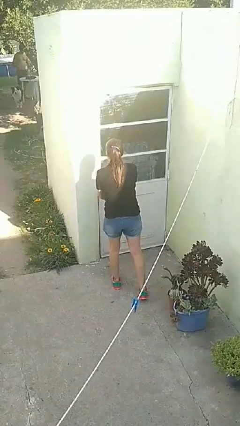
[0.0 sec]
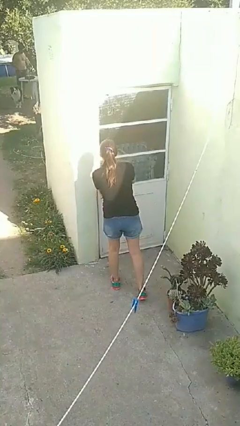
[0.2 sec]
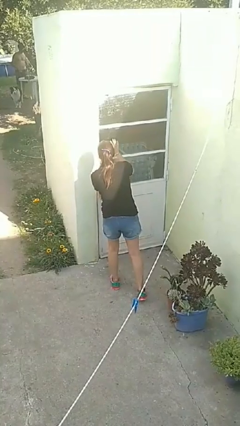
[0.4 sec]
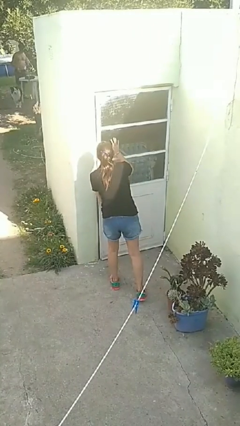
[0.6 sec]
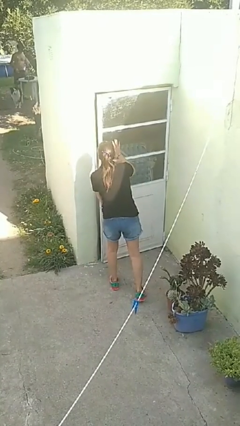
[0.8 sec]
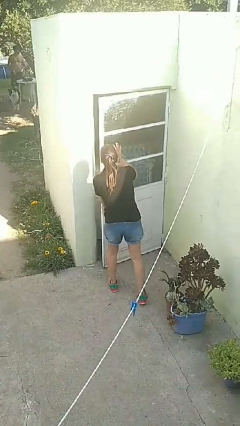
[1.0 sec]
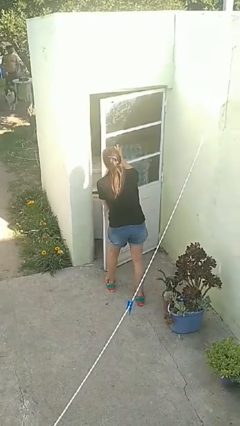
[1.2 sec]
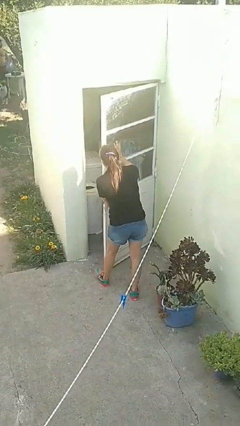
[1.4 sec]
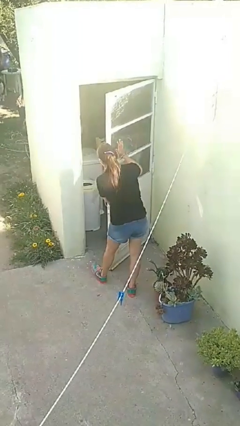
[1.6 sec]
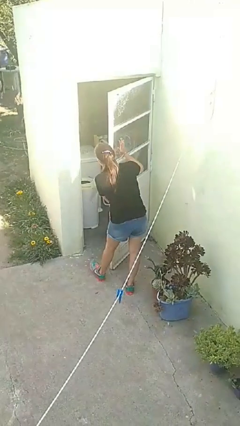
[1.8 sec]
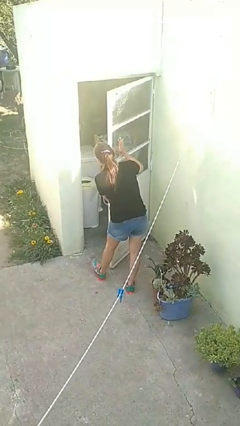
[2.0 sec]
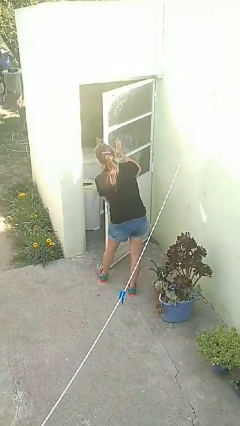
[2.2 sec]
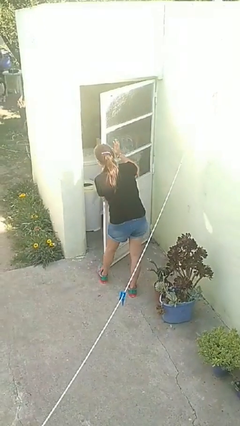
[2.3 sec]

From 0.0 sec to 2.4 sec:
person opens facility door

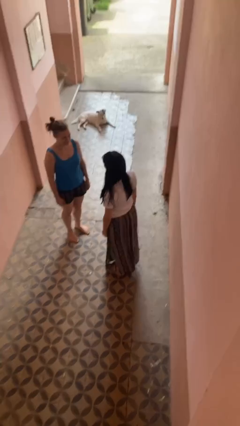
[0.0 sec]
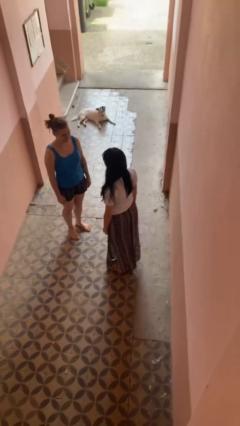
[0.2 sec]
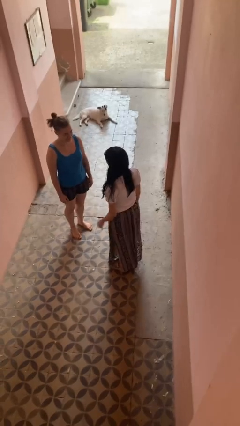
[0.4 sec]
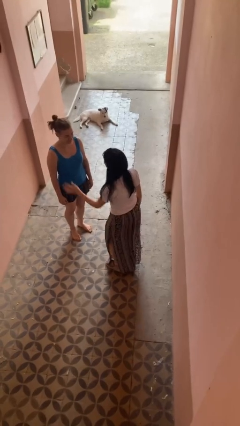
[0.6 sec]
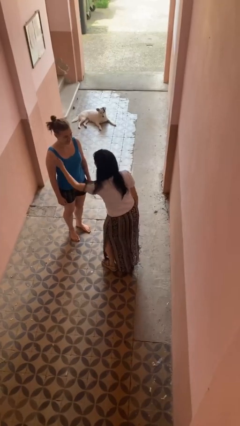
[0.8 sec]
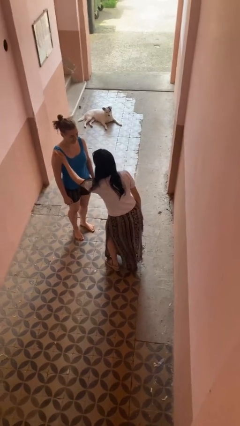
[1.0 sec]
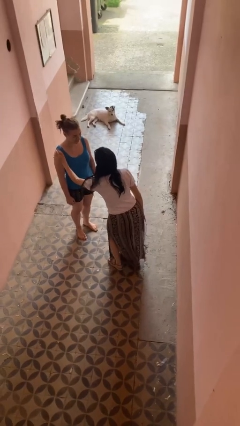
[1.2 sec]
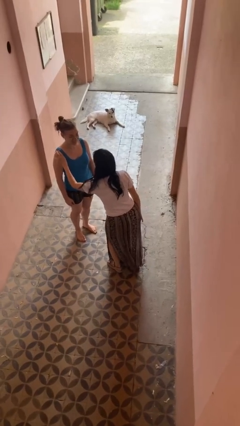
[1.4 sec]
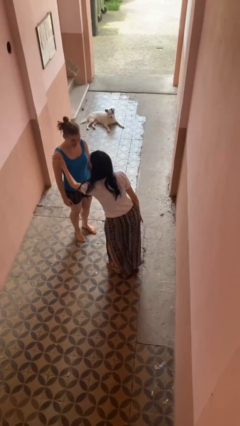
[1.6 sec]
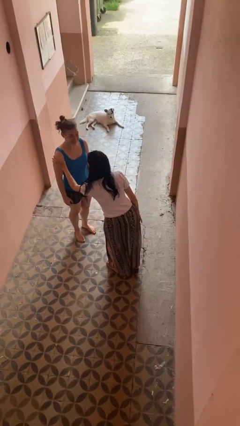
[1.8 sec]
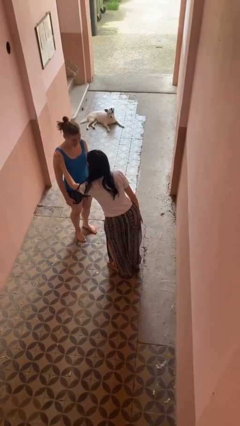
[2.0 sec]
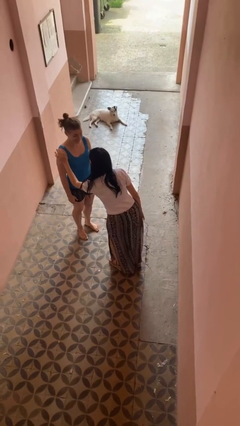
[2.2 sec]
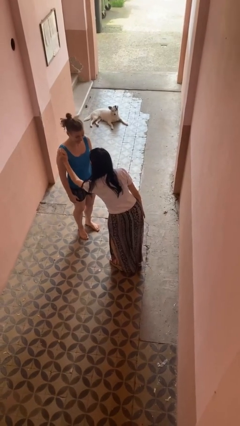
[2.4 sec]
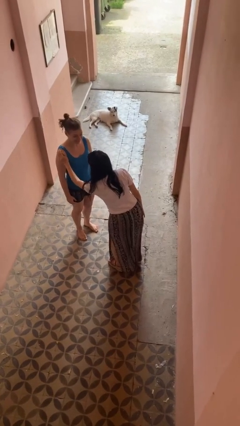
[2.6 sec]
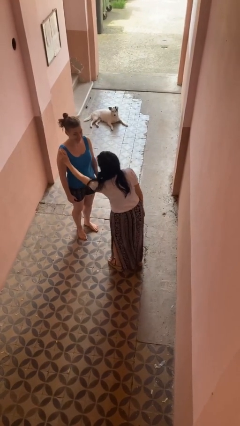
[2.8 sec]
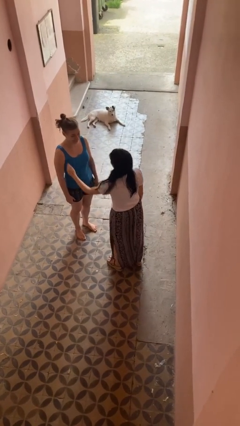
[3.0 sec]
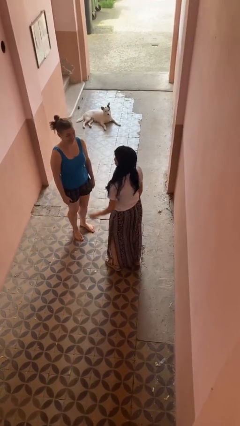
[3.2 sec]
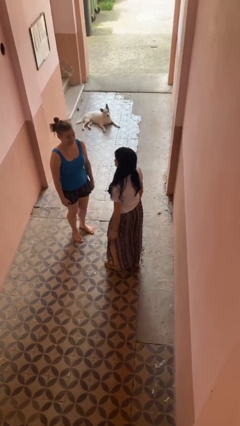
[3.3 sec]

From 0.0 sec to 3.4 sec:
person pounds shoulders of person

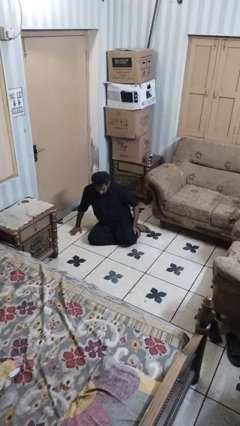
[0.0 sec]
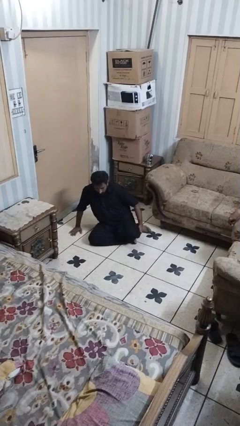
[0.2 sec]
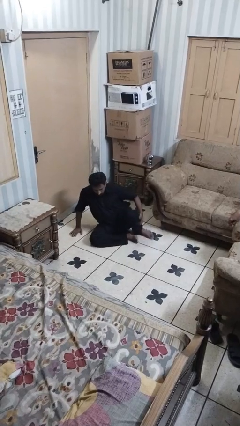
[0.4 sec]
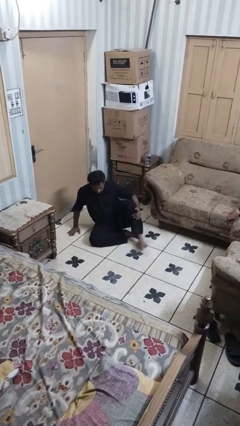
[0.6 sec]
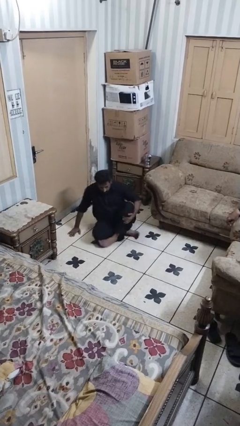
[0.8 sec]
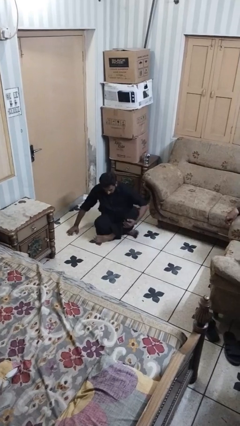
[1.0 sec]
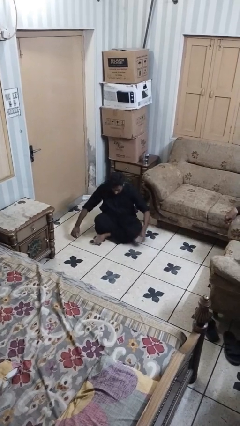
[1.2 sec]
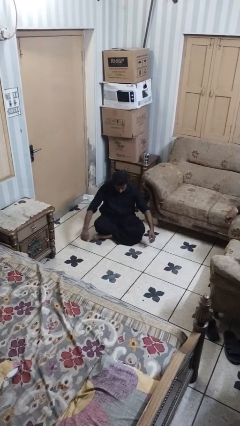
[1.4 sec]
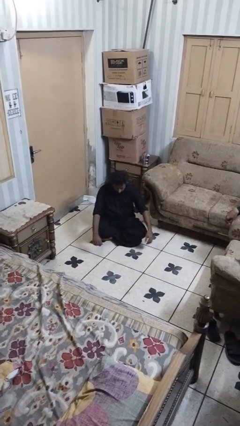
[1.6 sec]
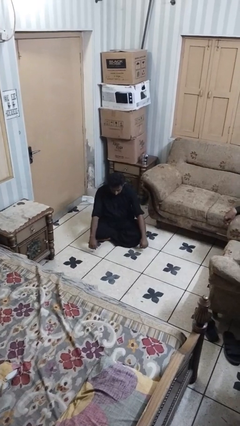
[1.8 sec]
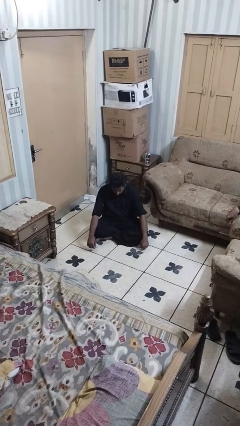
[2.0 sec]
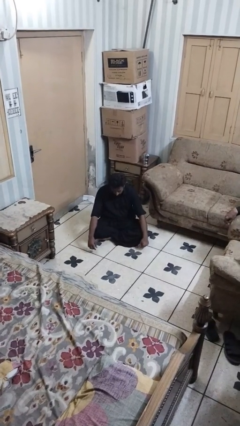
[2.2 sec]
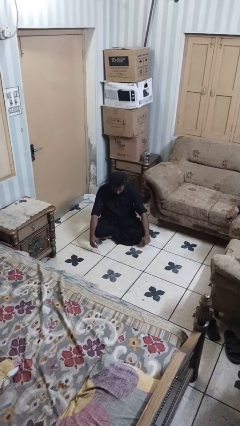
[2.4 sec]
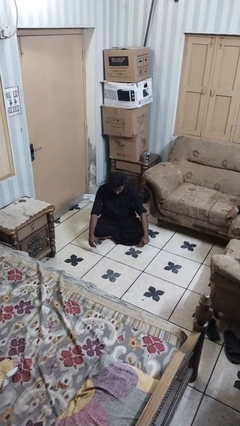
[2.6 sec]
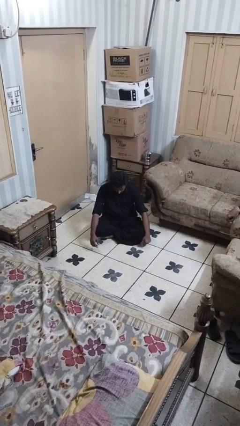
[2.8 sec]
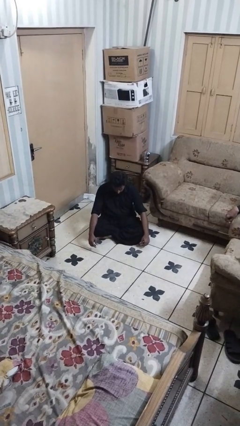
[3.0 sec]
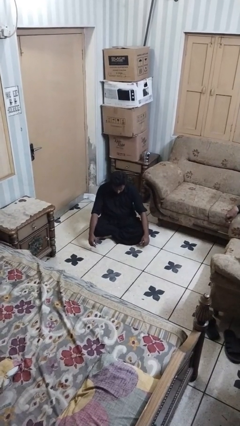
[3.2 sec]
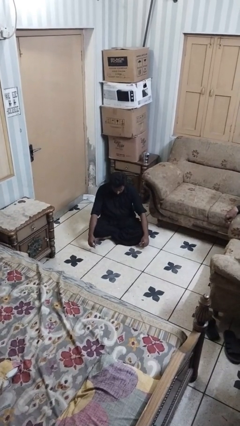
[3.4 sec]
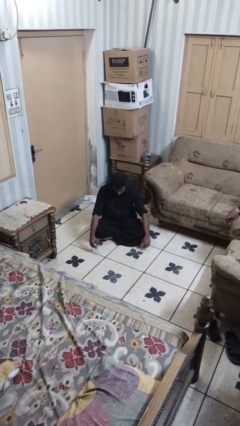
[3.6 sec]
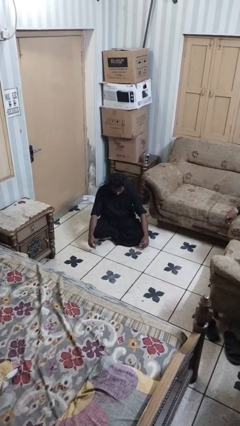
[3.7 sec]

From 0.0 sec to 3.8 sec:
person crosses legs

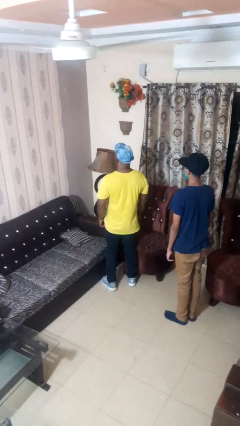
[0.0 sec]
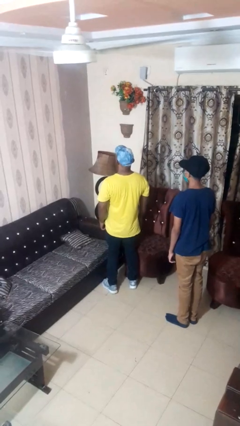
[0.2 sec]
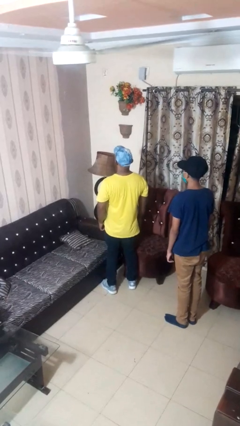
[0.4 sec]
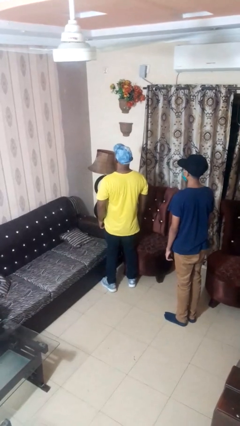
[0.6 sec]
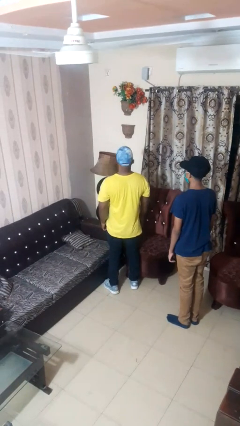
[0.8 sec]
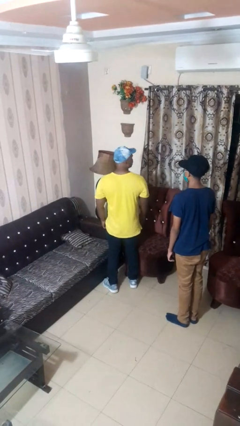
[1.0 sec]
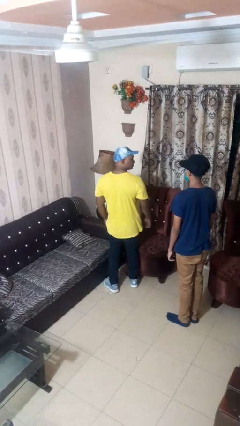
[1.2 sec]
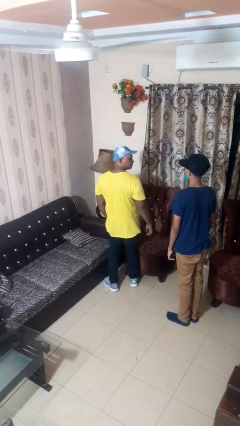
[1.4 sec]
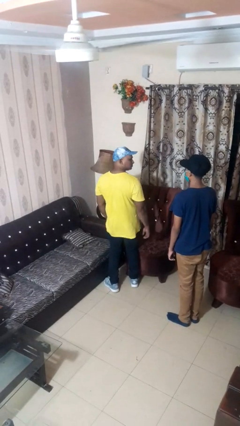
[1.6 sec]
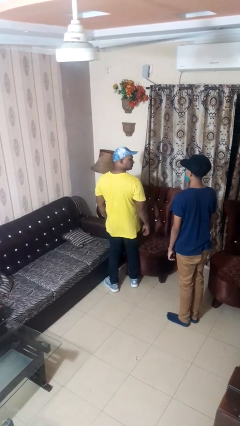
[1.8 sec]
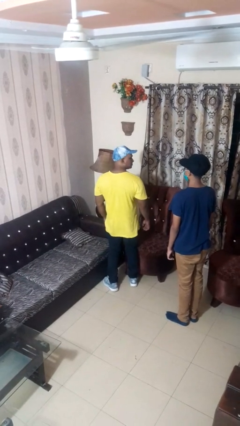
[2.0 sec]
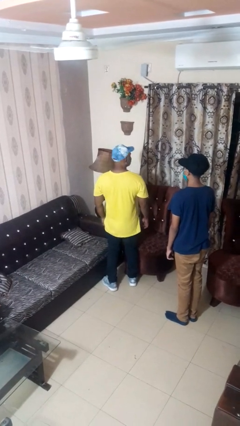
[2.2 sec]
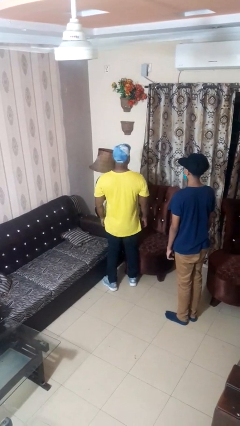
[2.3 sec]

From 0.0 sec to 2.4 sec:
person looks over shoulder

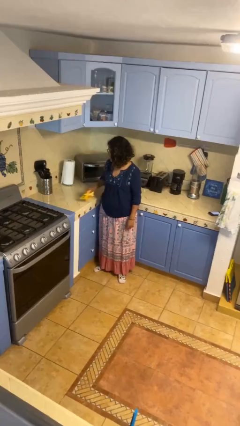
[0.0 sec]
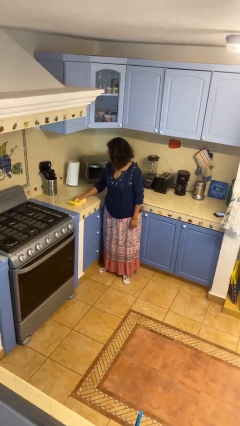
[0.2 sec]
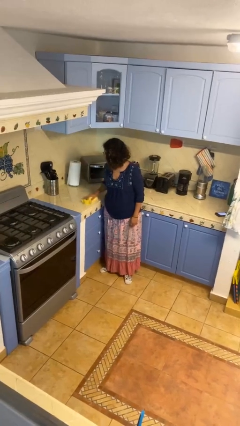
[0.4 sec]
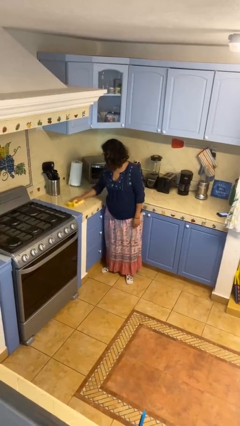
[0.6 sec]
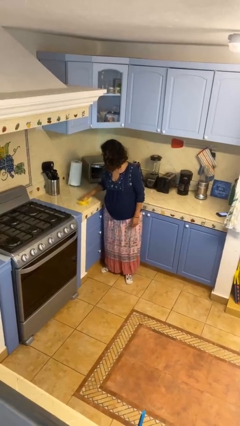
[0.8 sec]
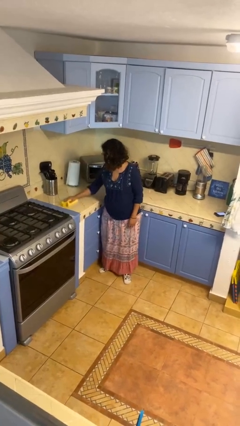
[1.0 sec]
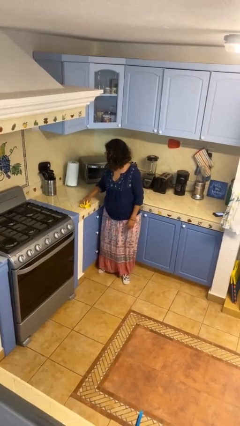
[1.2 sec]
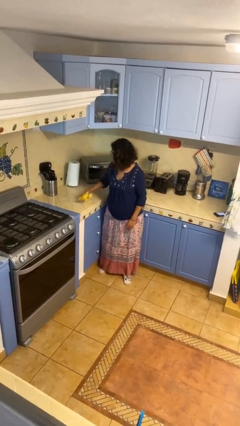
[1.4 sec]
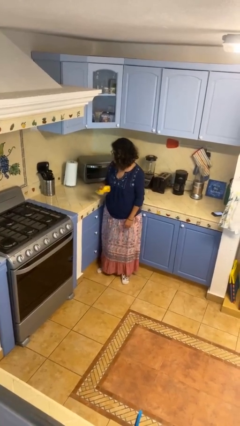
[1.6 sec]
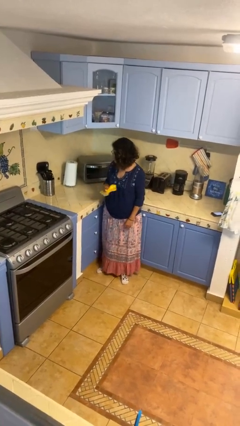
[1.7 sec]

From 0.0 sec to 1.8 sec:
person cleans table with rag

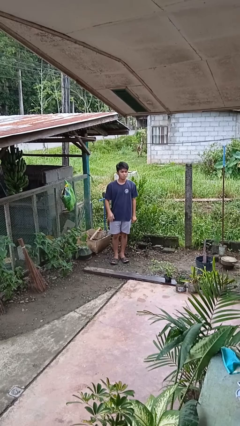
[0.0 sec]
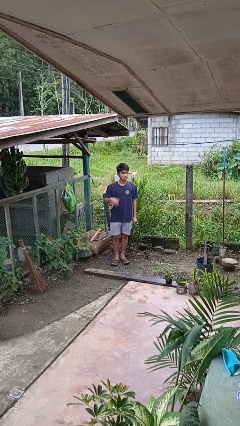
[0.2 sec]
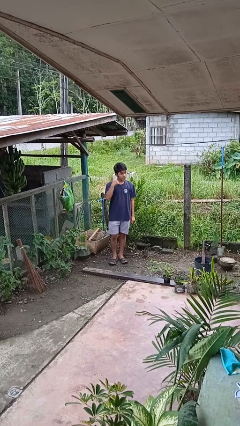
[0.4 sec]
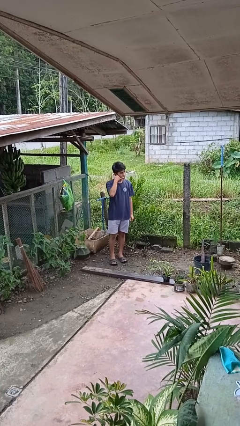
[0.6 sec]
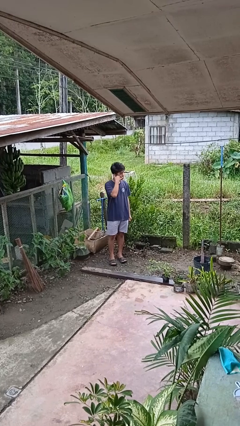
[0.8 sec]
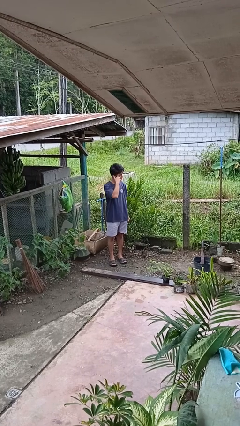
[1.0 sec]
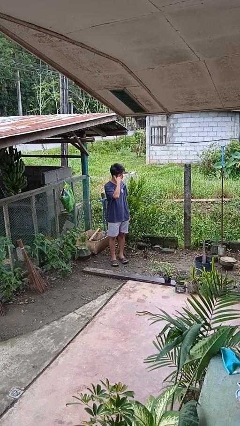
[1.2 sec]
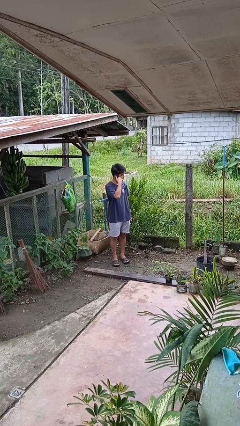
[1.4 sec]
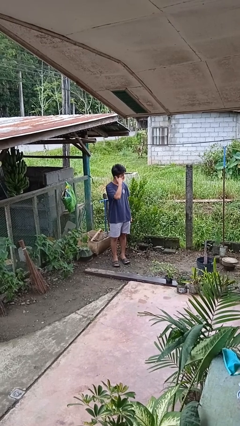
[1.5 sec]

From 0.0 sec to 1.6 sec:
person gestures call me

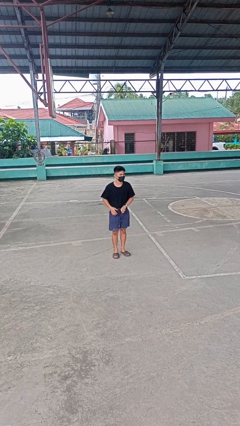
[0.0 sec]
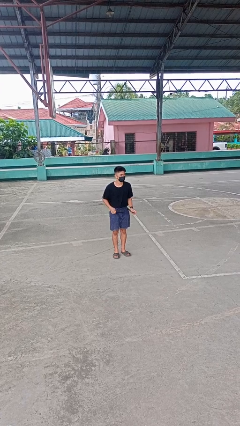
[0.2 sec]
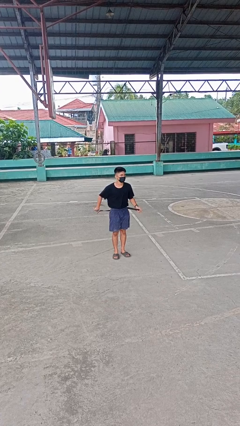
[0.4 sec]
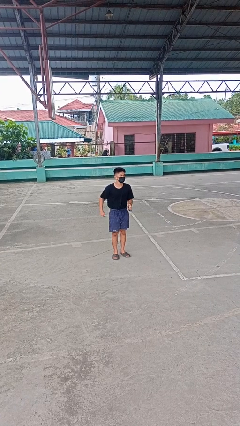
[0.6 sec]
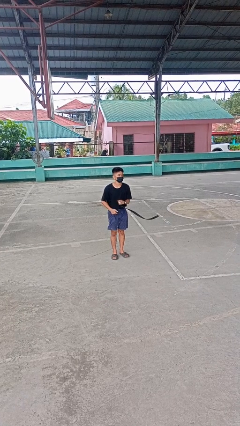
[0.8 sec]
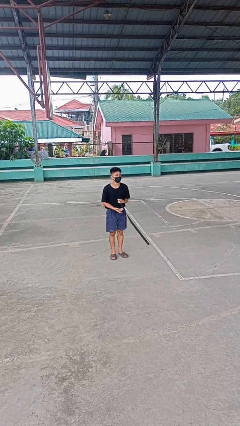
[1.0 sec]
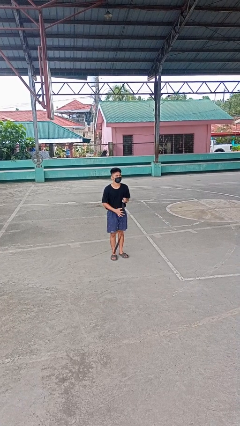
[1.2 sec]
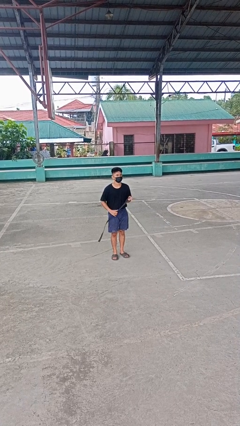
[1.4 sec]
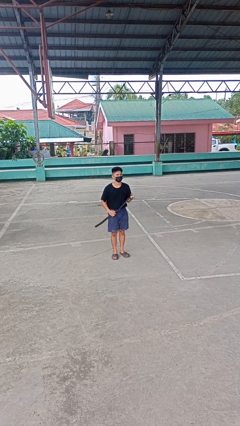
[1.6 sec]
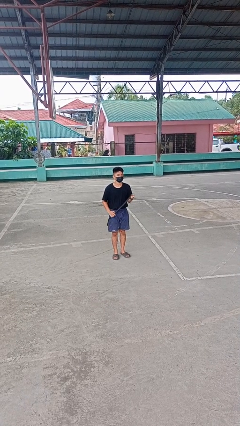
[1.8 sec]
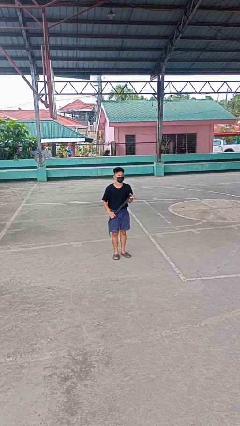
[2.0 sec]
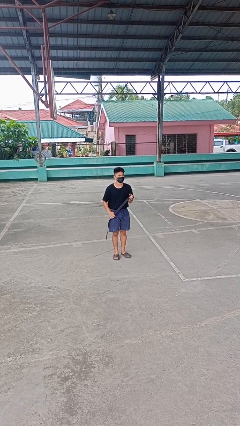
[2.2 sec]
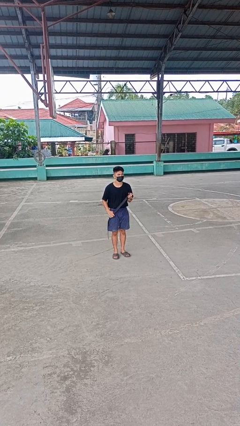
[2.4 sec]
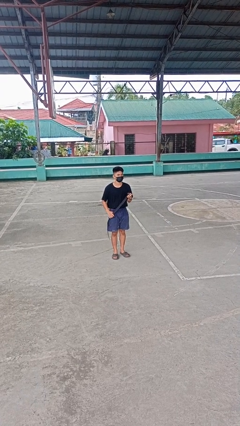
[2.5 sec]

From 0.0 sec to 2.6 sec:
person takes off belt
